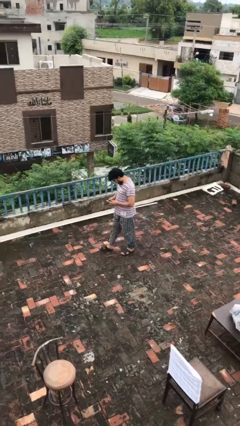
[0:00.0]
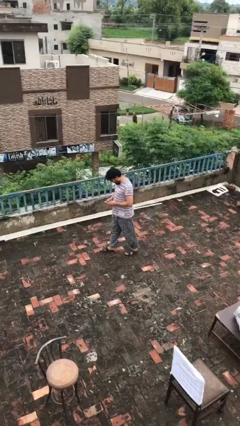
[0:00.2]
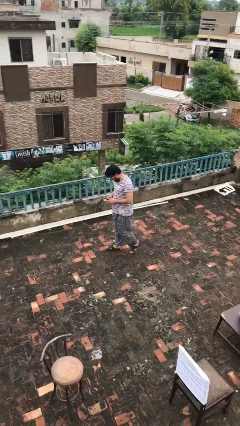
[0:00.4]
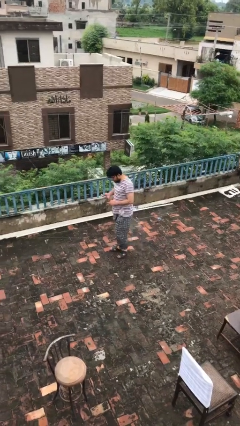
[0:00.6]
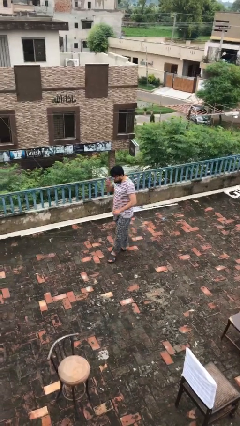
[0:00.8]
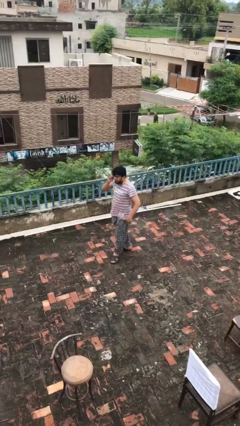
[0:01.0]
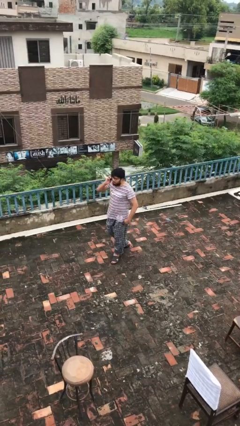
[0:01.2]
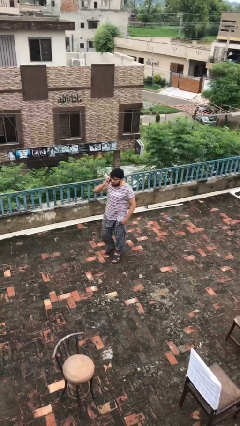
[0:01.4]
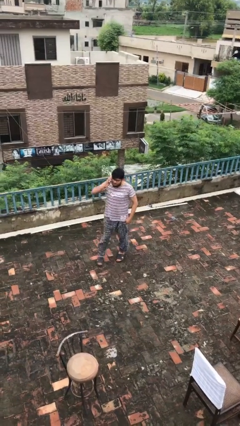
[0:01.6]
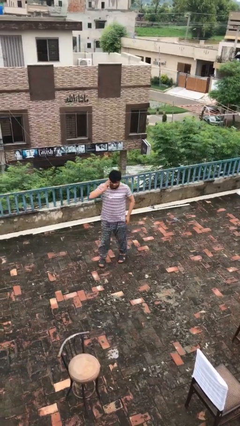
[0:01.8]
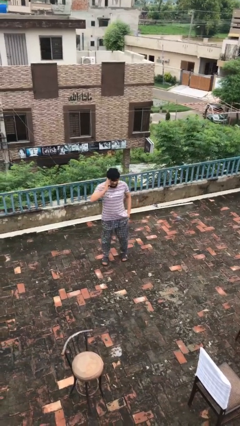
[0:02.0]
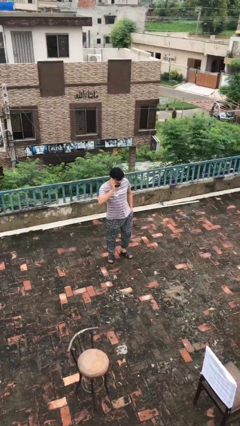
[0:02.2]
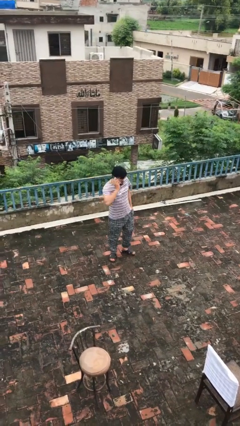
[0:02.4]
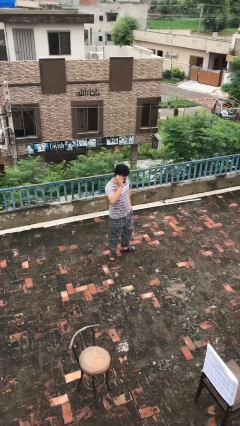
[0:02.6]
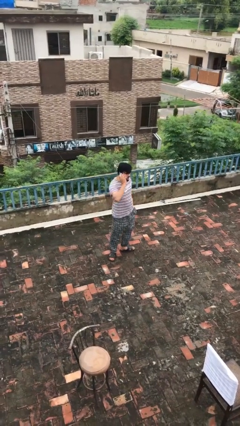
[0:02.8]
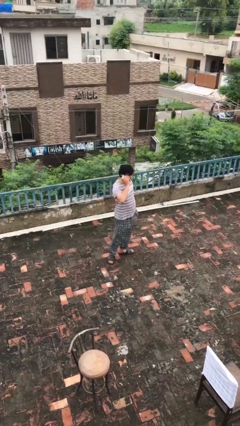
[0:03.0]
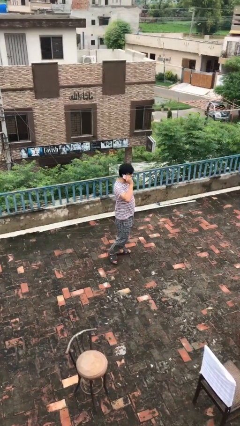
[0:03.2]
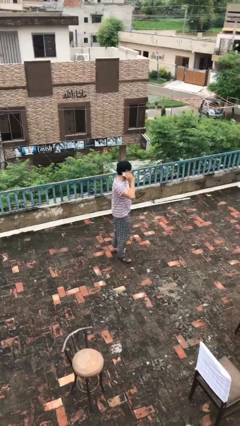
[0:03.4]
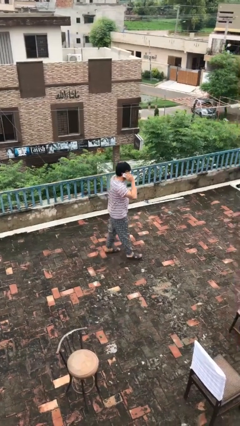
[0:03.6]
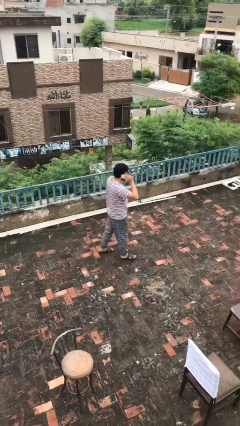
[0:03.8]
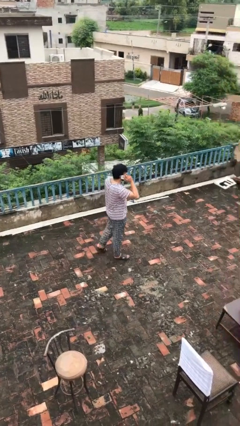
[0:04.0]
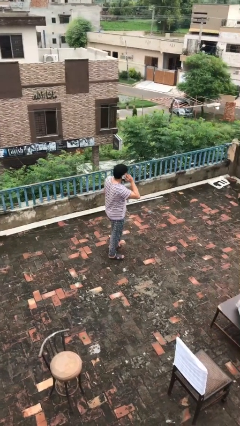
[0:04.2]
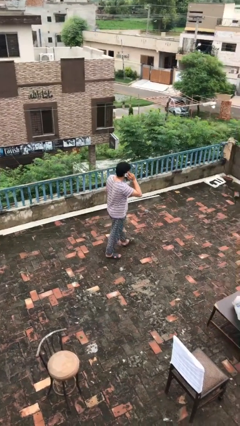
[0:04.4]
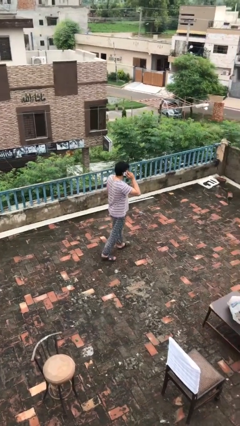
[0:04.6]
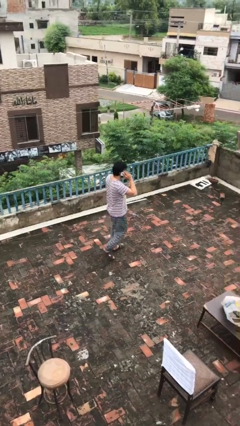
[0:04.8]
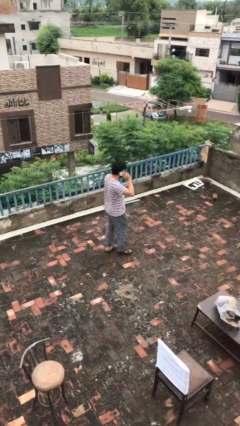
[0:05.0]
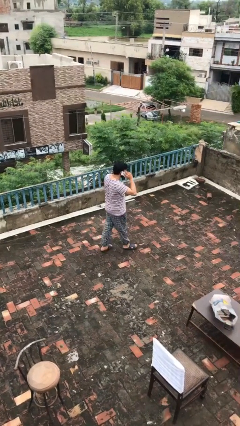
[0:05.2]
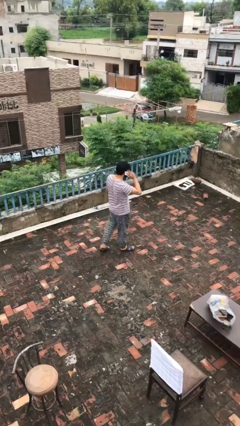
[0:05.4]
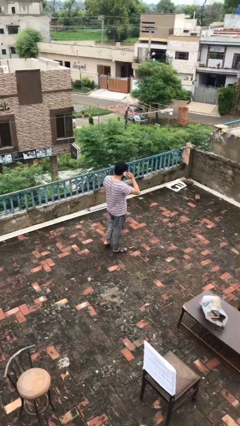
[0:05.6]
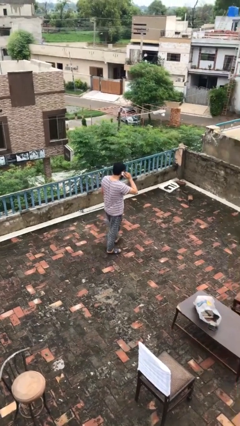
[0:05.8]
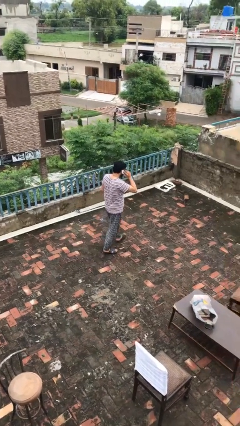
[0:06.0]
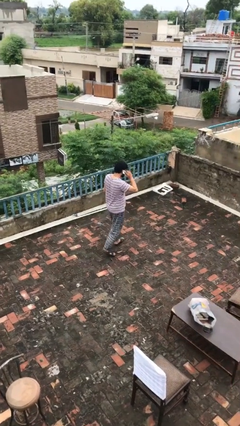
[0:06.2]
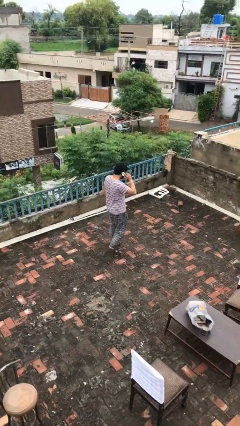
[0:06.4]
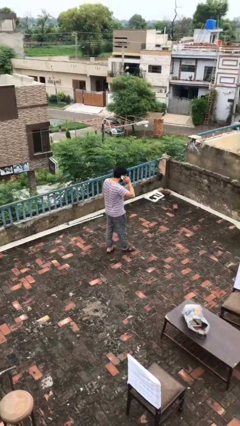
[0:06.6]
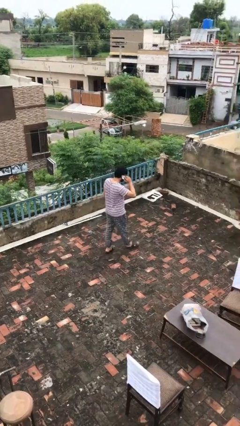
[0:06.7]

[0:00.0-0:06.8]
person talks on phone

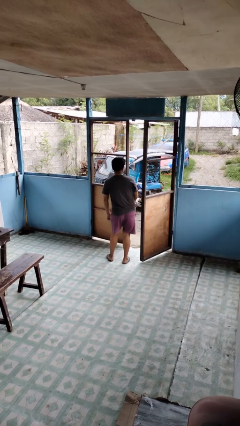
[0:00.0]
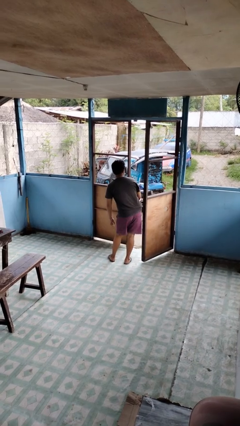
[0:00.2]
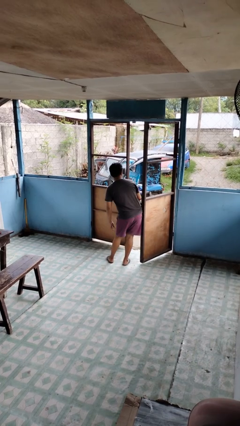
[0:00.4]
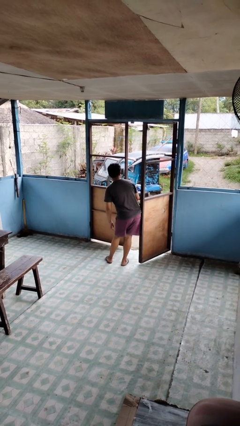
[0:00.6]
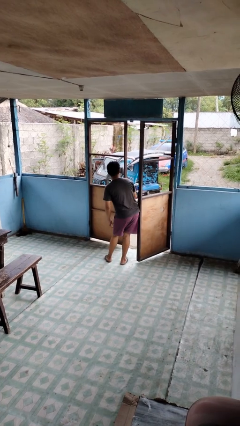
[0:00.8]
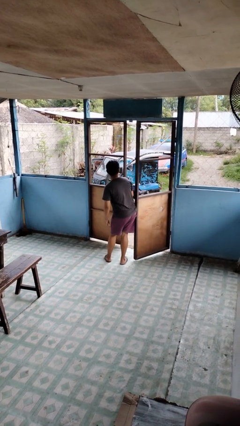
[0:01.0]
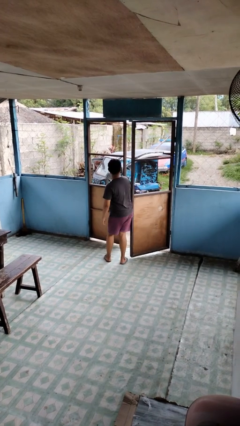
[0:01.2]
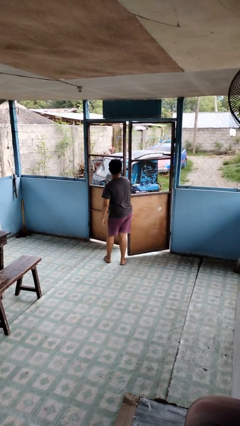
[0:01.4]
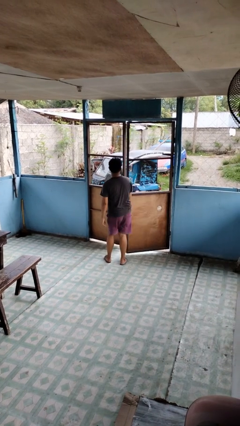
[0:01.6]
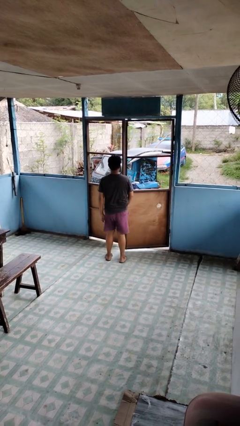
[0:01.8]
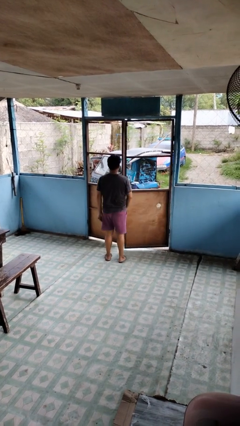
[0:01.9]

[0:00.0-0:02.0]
person closes door with hip

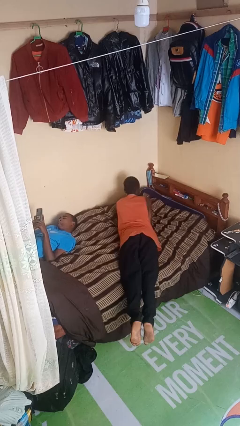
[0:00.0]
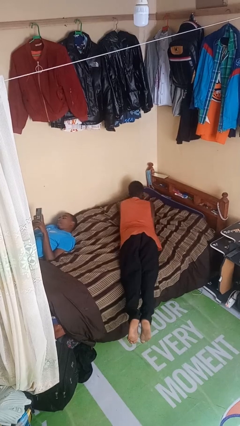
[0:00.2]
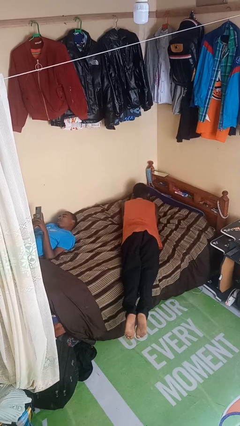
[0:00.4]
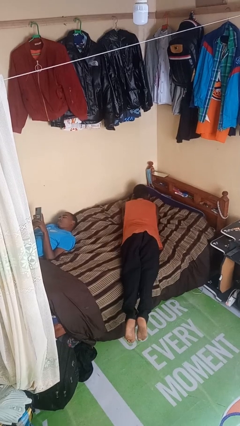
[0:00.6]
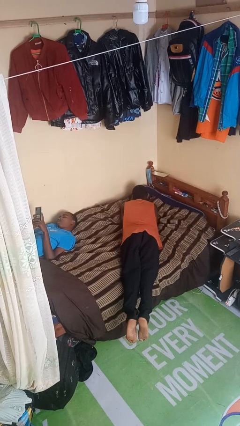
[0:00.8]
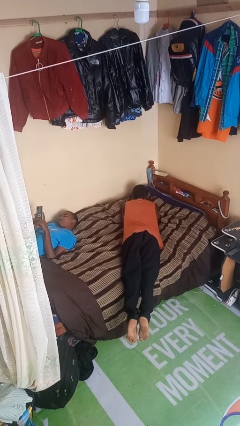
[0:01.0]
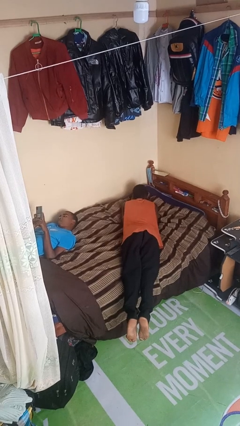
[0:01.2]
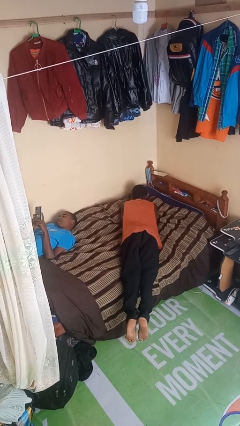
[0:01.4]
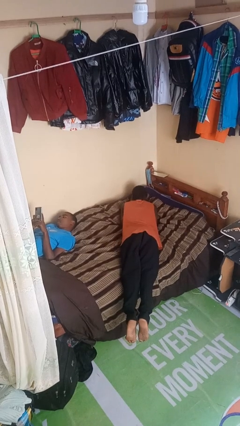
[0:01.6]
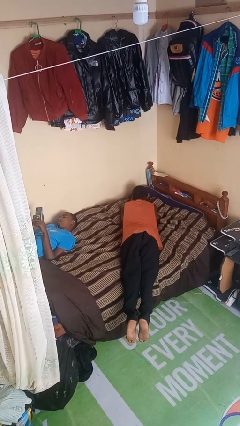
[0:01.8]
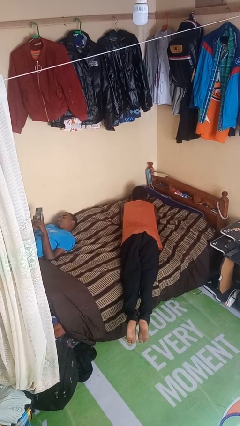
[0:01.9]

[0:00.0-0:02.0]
person lies down on bed

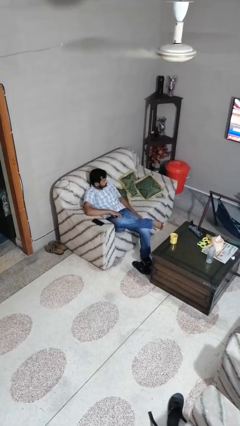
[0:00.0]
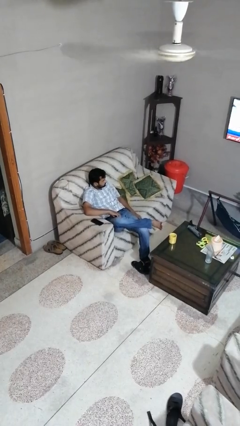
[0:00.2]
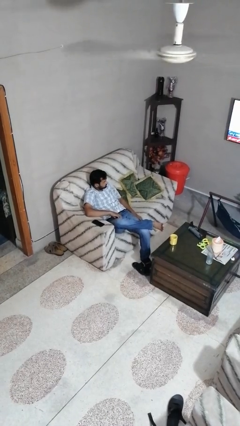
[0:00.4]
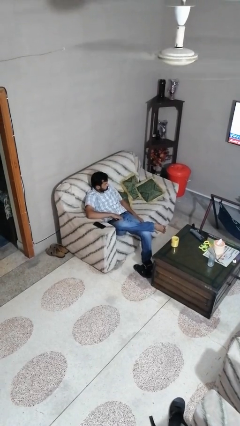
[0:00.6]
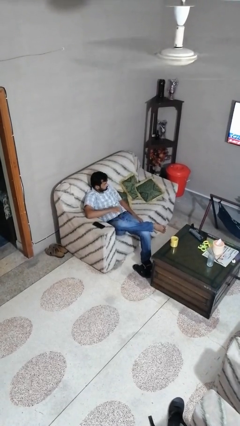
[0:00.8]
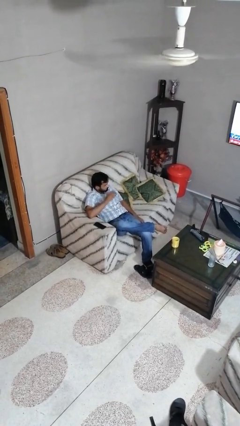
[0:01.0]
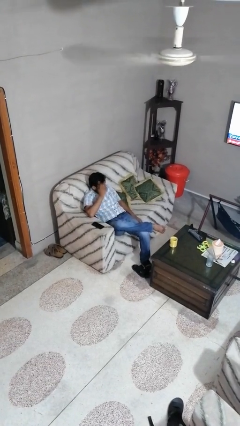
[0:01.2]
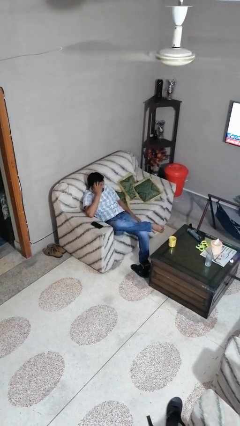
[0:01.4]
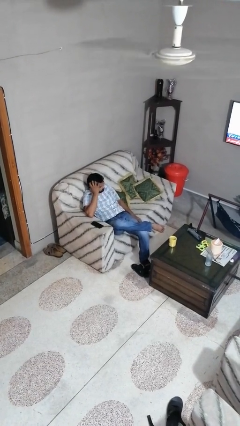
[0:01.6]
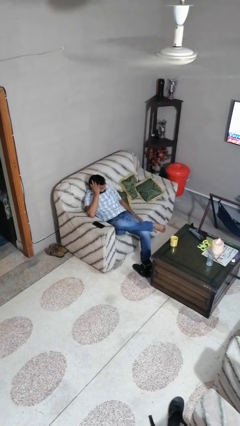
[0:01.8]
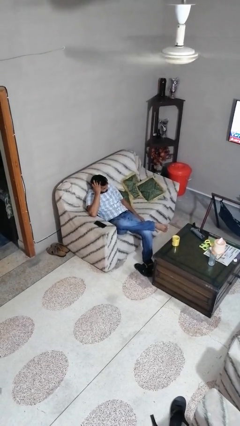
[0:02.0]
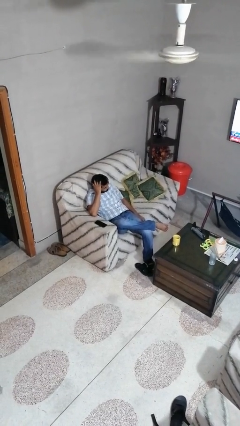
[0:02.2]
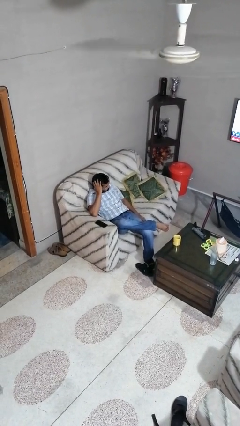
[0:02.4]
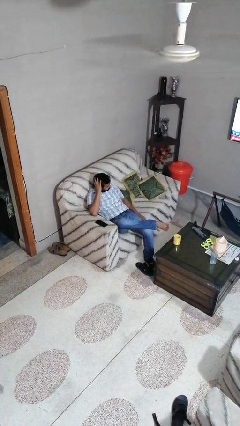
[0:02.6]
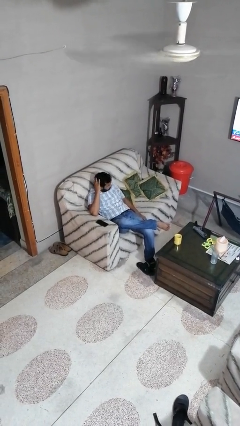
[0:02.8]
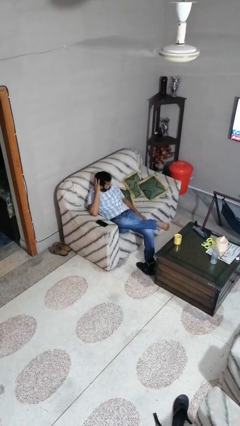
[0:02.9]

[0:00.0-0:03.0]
person strokes hair

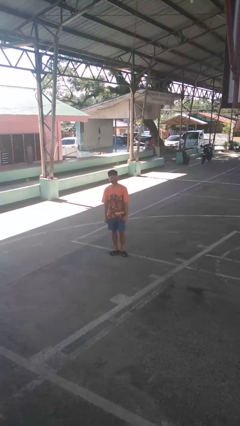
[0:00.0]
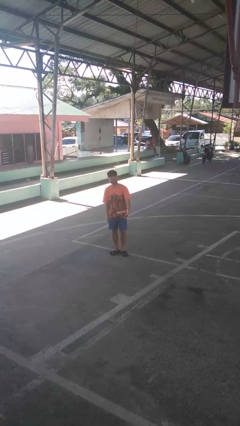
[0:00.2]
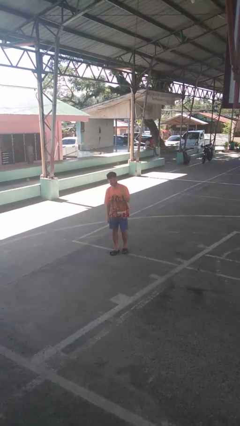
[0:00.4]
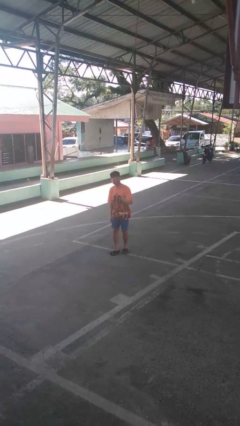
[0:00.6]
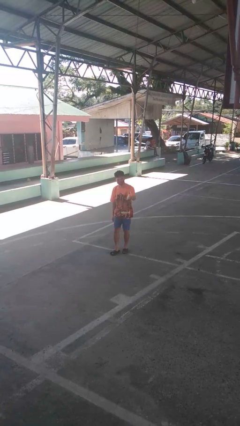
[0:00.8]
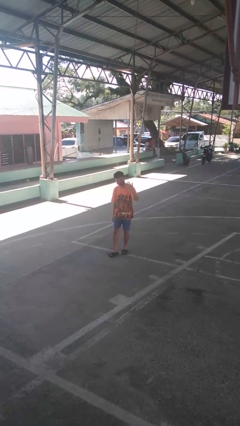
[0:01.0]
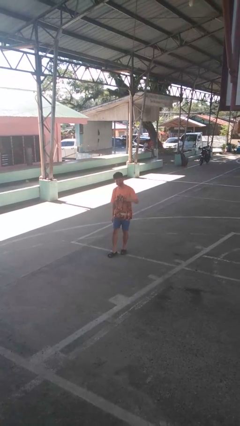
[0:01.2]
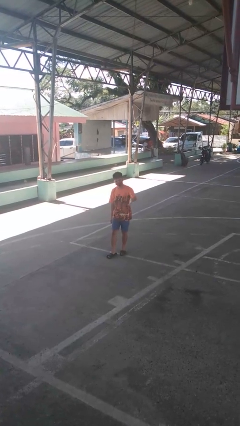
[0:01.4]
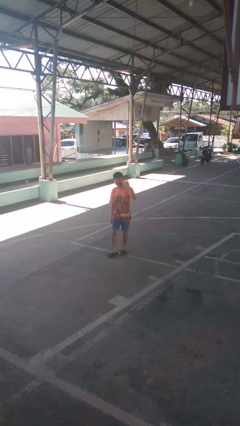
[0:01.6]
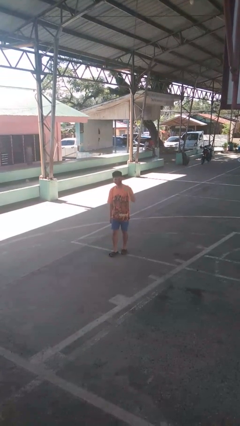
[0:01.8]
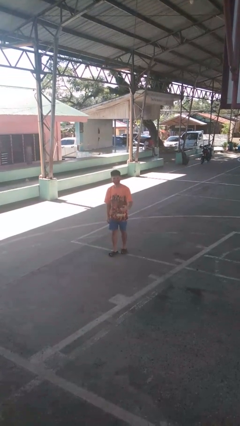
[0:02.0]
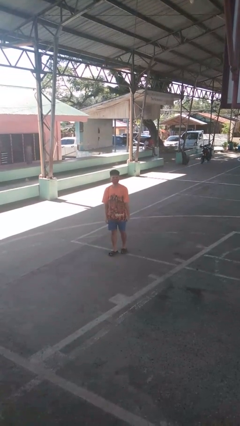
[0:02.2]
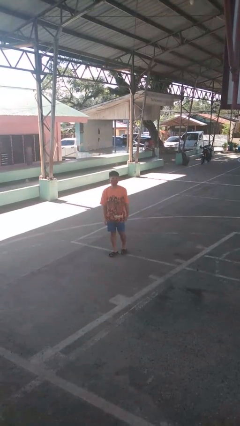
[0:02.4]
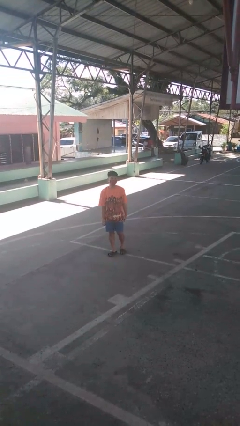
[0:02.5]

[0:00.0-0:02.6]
person gestures come here

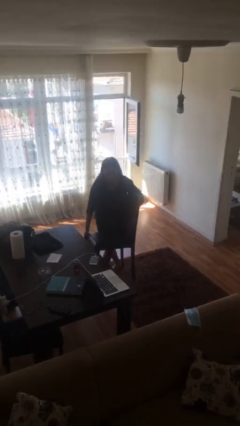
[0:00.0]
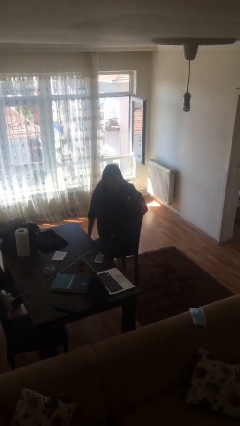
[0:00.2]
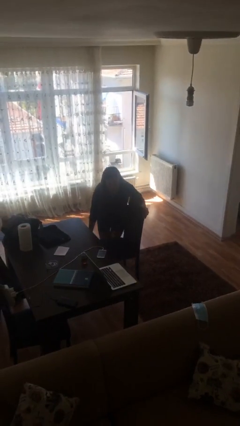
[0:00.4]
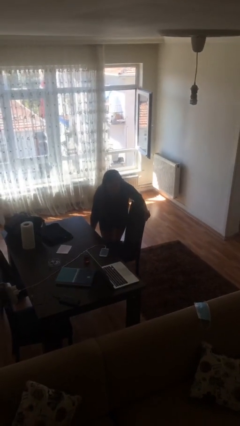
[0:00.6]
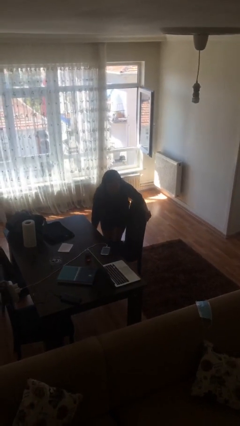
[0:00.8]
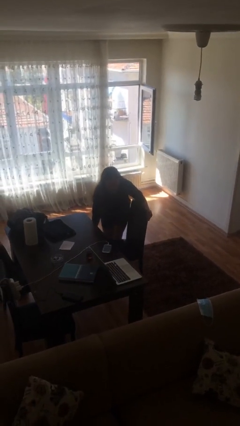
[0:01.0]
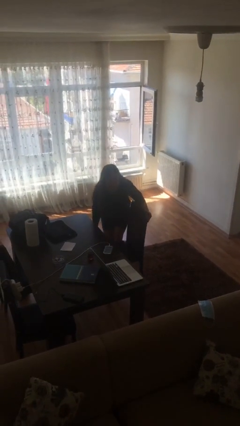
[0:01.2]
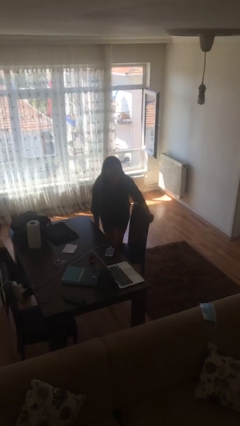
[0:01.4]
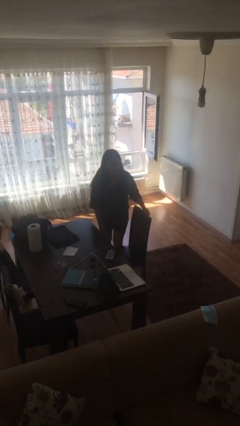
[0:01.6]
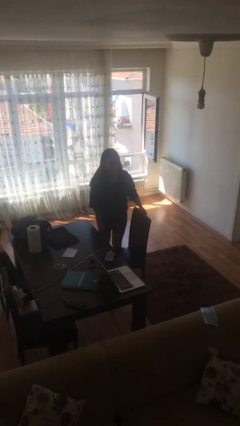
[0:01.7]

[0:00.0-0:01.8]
person puts down object on floor
